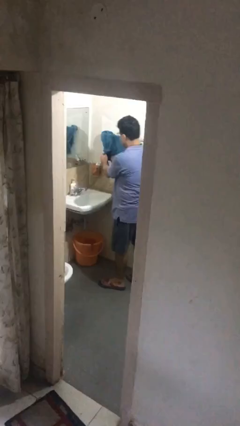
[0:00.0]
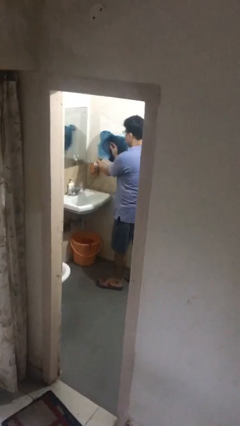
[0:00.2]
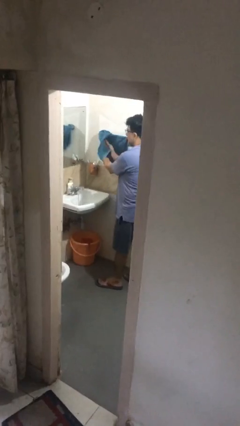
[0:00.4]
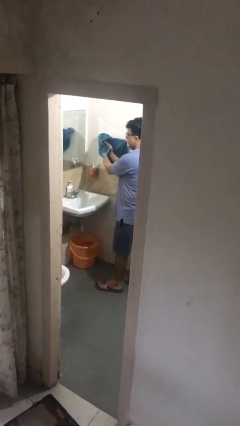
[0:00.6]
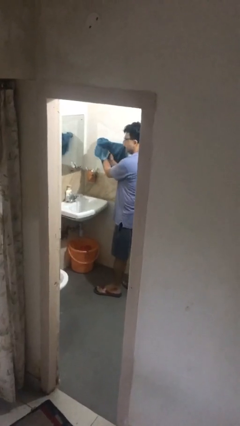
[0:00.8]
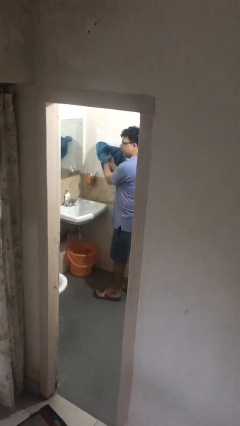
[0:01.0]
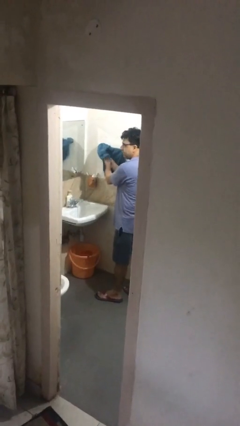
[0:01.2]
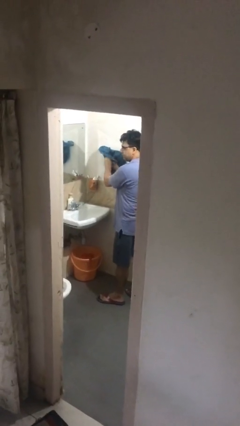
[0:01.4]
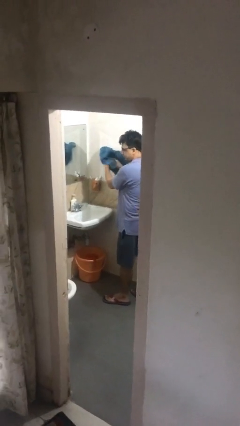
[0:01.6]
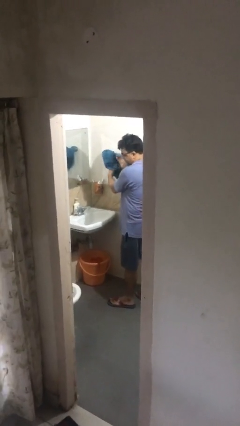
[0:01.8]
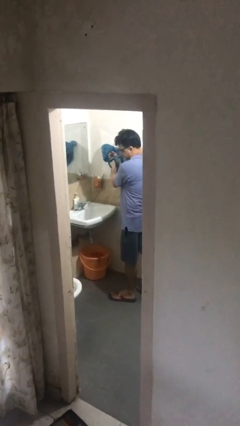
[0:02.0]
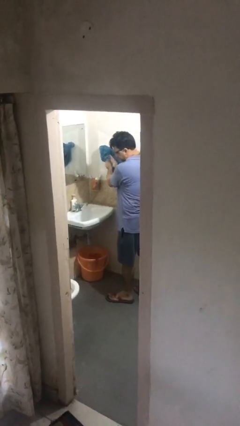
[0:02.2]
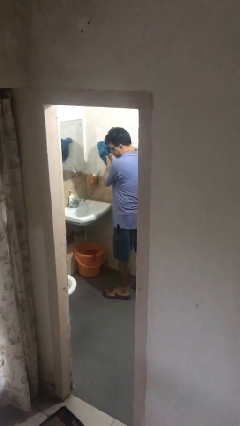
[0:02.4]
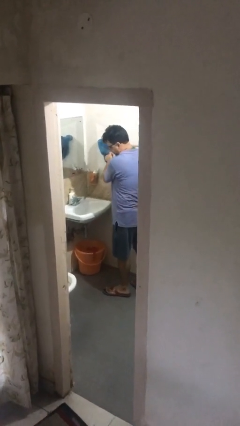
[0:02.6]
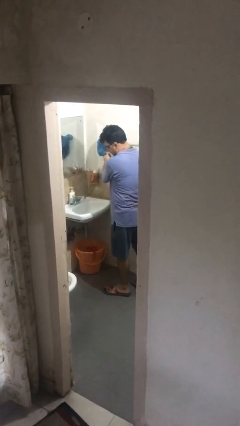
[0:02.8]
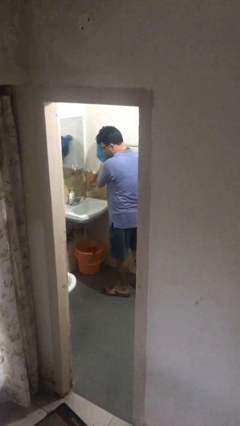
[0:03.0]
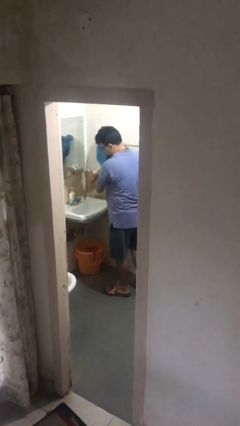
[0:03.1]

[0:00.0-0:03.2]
person dries hands with towel

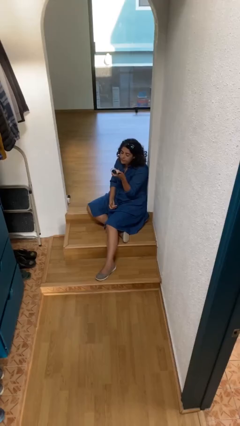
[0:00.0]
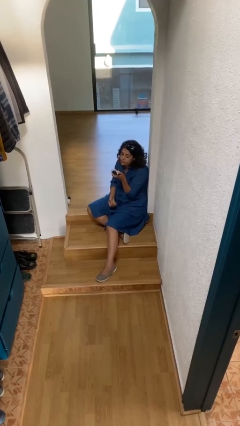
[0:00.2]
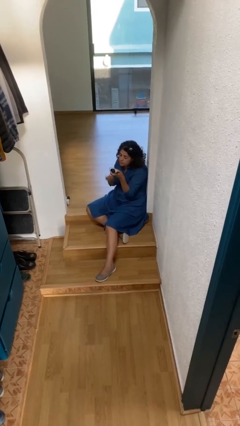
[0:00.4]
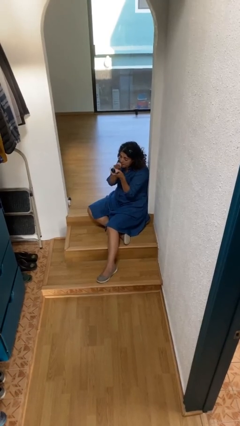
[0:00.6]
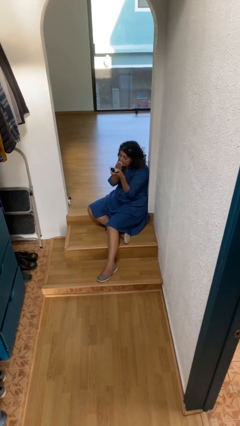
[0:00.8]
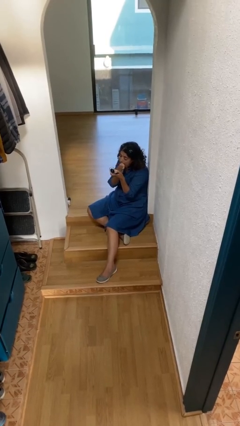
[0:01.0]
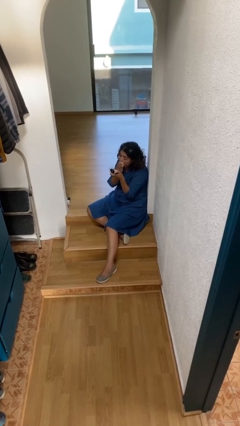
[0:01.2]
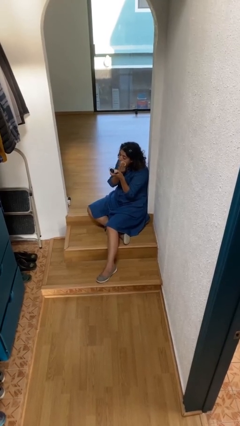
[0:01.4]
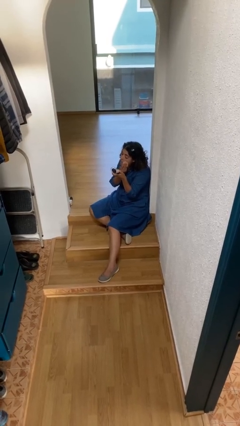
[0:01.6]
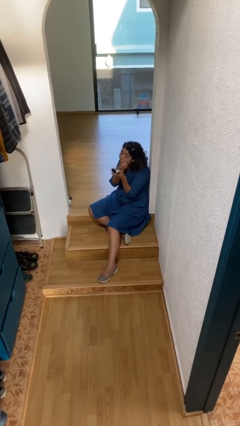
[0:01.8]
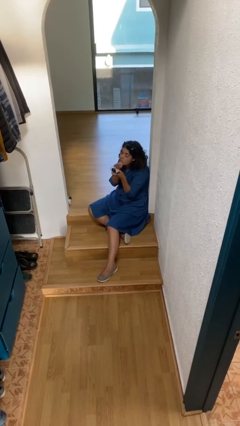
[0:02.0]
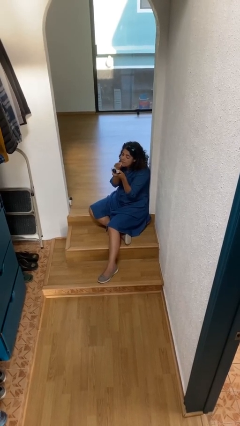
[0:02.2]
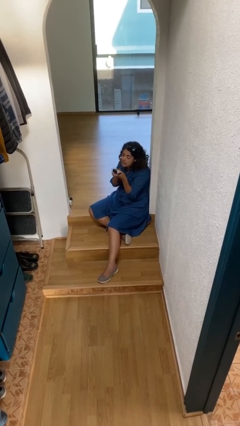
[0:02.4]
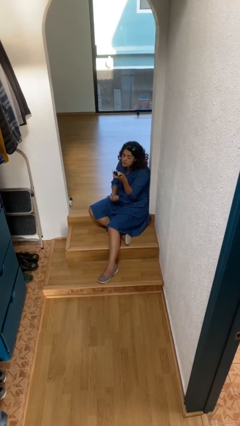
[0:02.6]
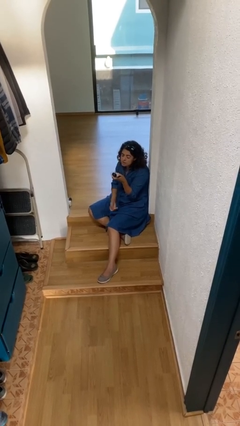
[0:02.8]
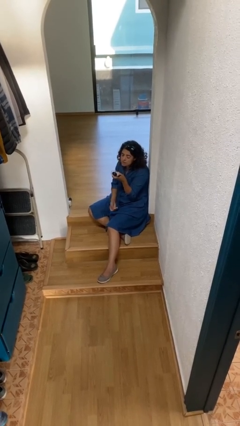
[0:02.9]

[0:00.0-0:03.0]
person applies foundation makeup

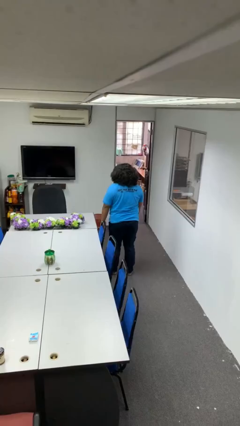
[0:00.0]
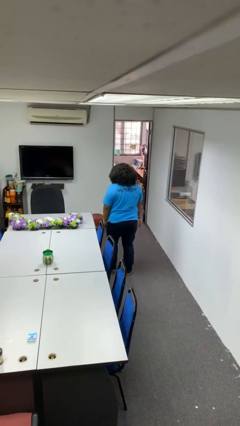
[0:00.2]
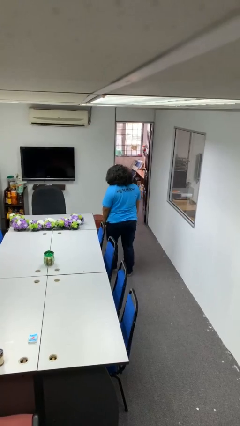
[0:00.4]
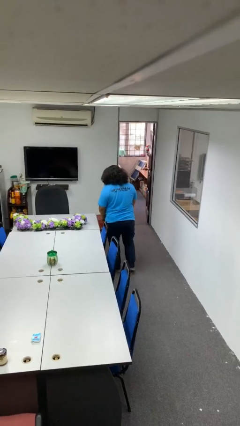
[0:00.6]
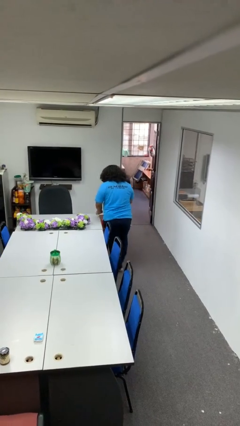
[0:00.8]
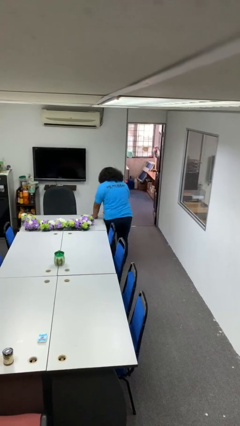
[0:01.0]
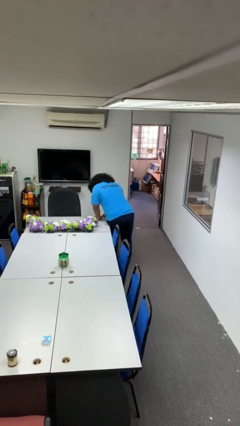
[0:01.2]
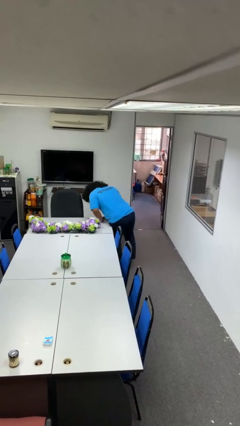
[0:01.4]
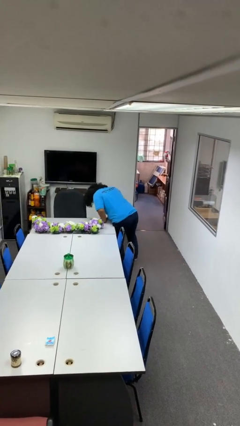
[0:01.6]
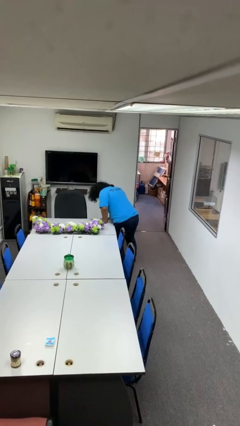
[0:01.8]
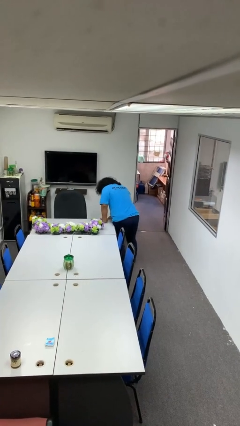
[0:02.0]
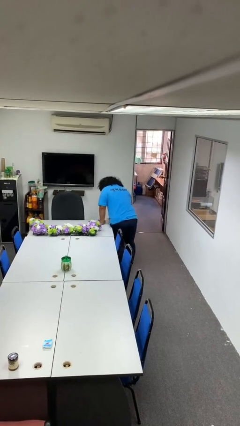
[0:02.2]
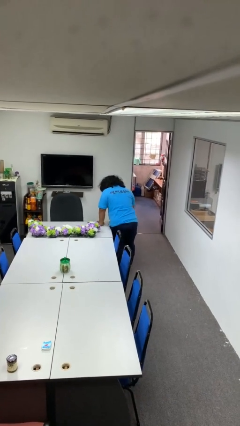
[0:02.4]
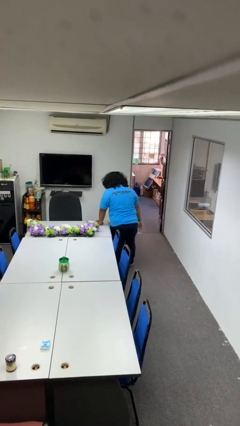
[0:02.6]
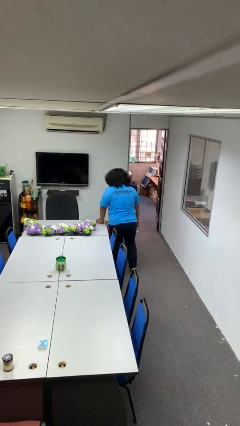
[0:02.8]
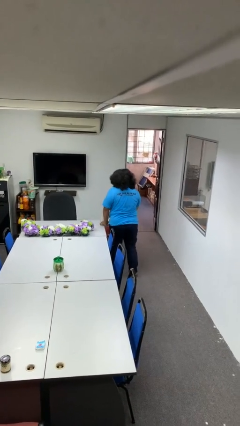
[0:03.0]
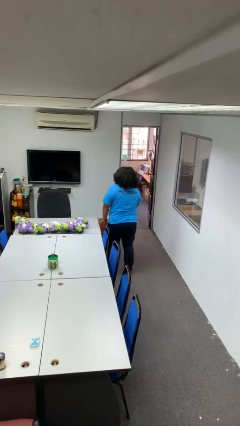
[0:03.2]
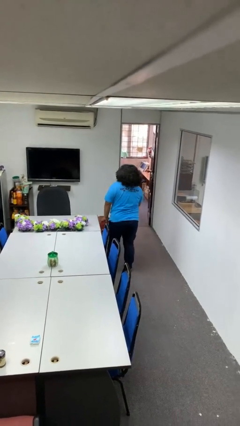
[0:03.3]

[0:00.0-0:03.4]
person bumps into table

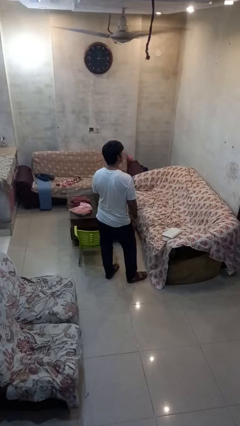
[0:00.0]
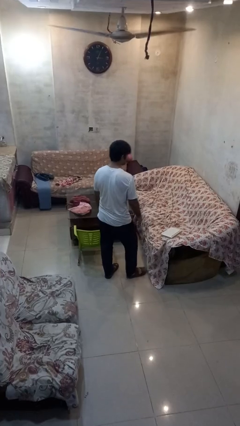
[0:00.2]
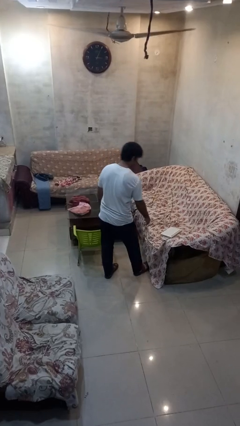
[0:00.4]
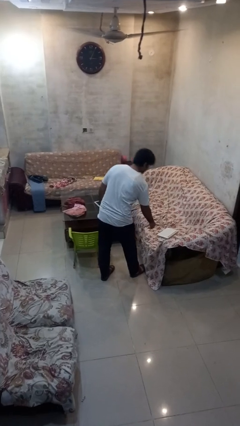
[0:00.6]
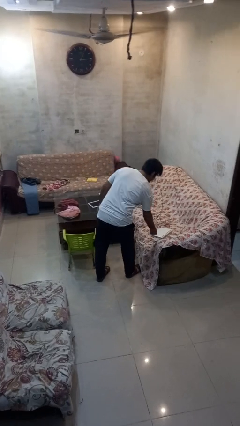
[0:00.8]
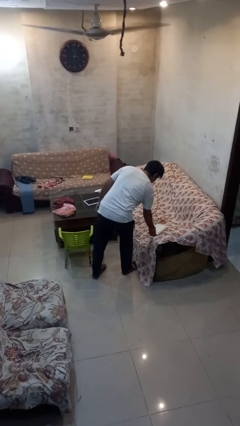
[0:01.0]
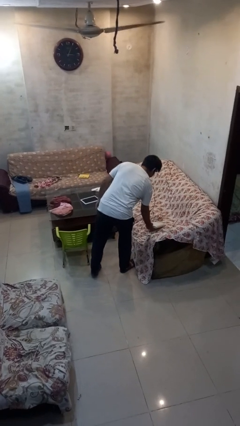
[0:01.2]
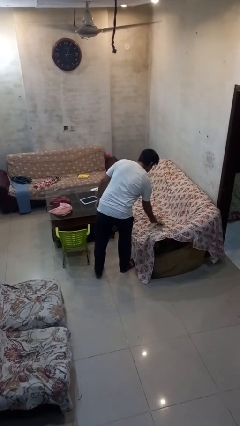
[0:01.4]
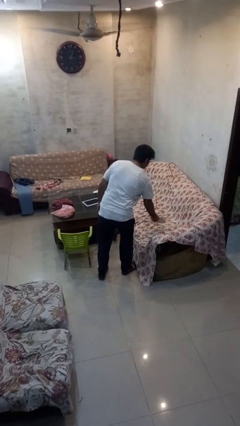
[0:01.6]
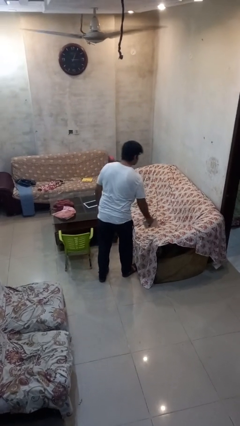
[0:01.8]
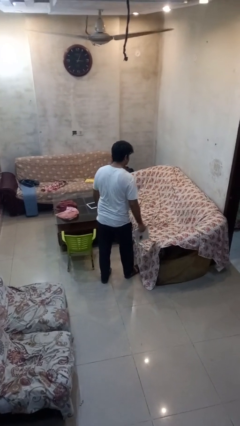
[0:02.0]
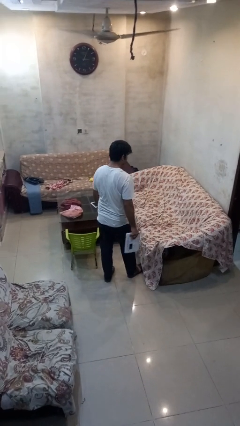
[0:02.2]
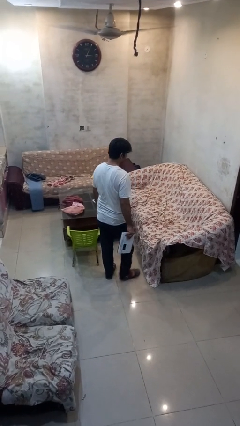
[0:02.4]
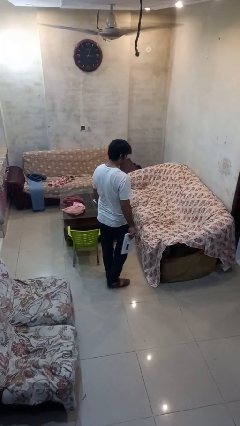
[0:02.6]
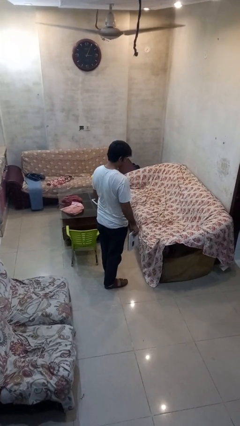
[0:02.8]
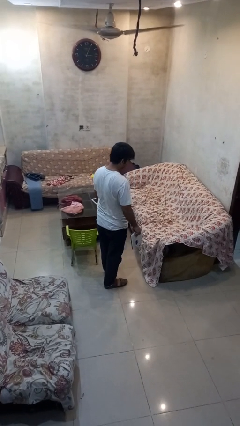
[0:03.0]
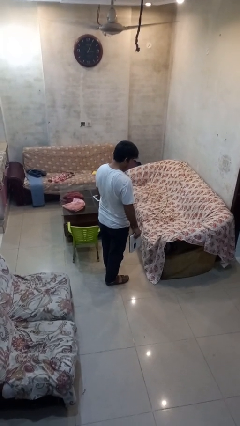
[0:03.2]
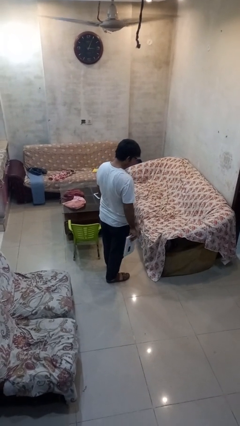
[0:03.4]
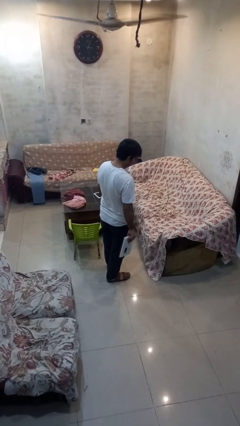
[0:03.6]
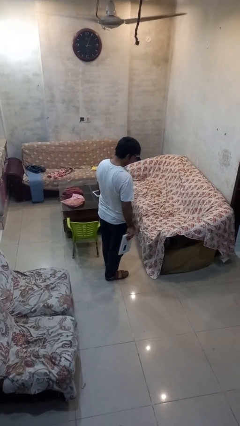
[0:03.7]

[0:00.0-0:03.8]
person picks up object from couch

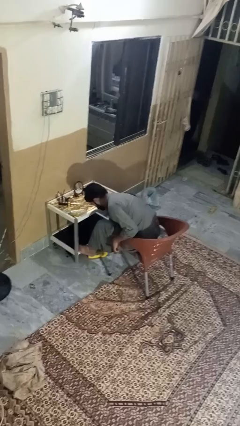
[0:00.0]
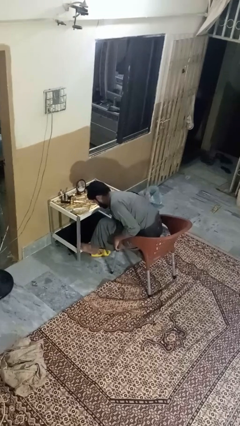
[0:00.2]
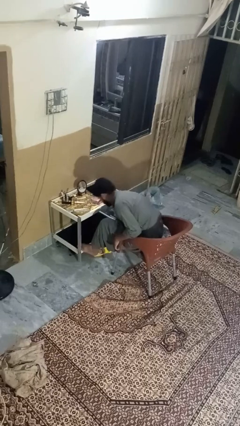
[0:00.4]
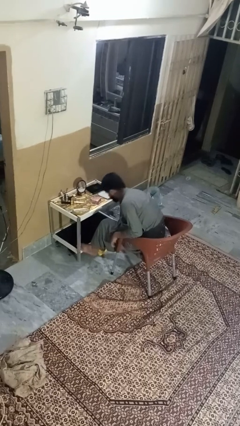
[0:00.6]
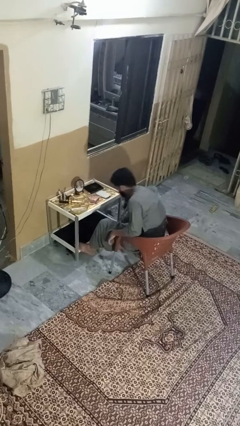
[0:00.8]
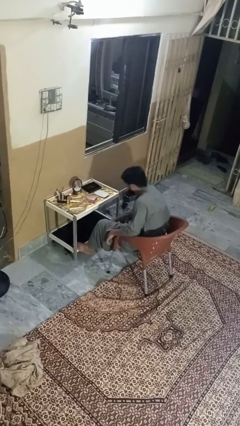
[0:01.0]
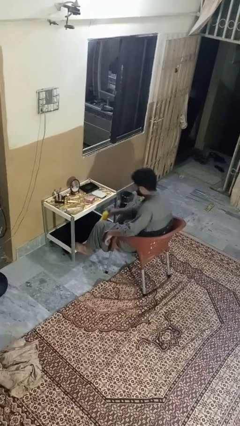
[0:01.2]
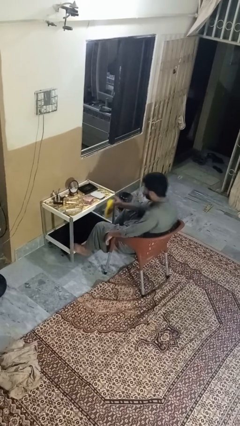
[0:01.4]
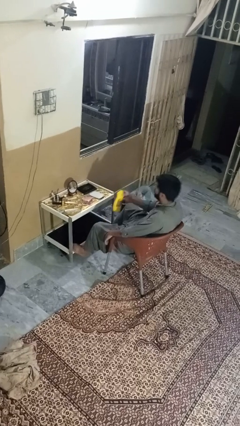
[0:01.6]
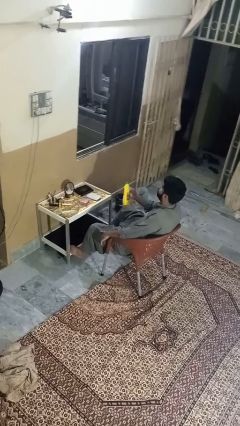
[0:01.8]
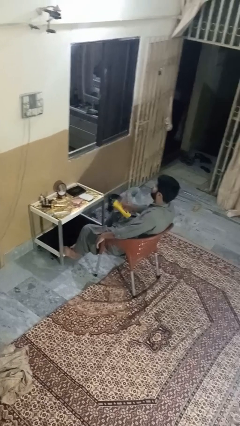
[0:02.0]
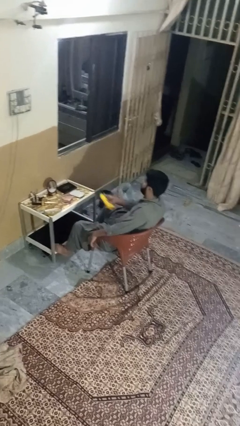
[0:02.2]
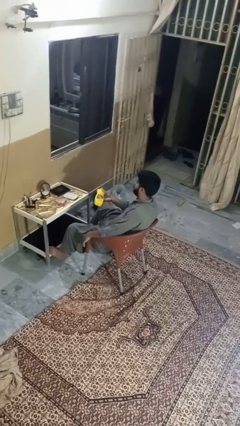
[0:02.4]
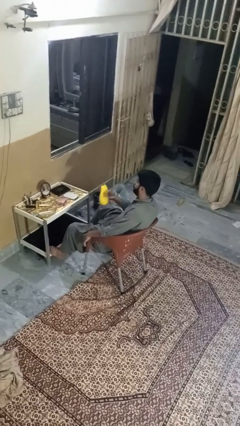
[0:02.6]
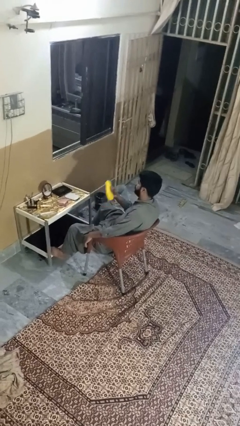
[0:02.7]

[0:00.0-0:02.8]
person picks up object from floor

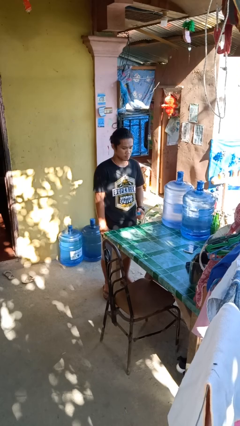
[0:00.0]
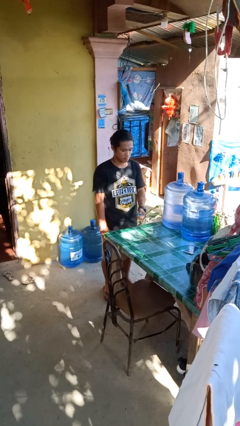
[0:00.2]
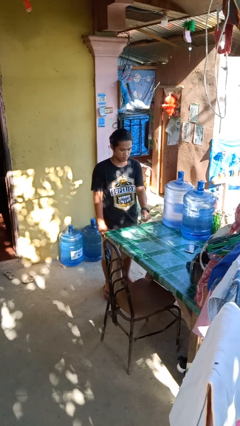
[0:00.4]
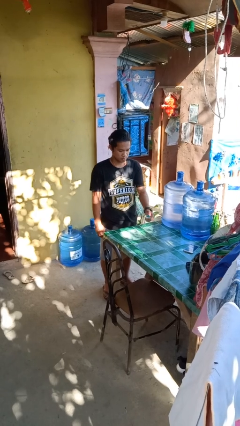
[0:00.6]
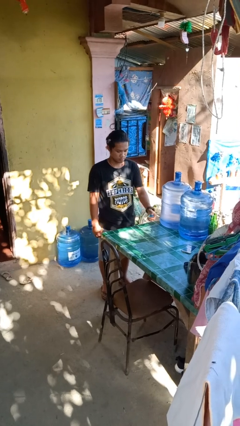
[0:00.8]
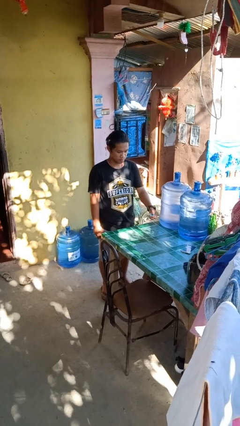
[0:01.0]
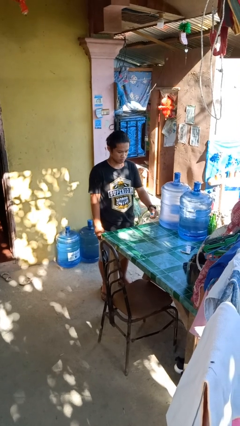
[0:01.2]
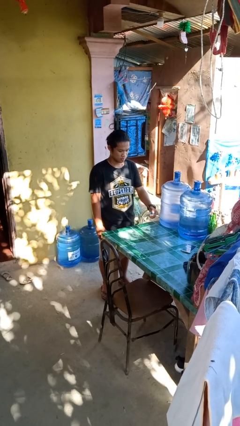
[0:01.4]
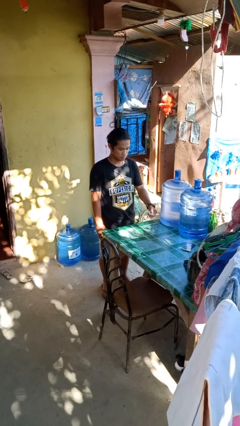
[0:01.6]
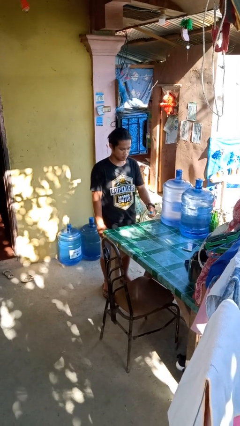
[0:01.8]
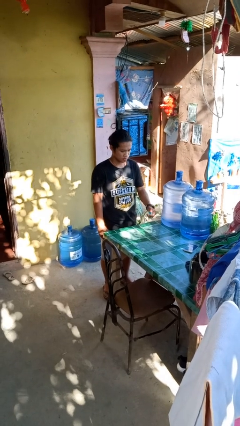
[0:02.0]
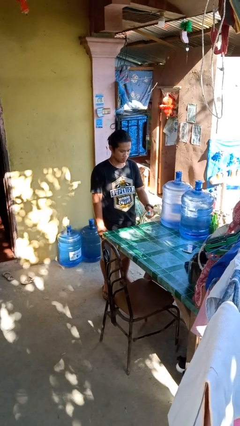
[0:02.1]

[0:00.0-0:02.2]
person sprays from bottle
